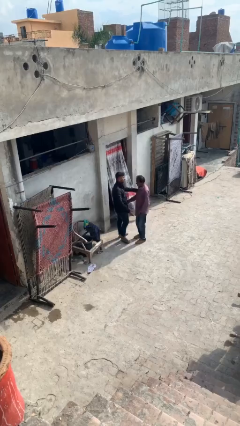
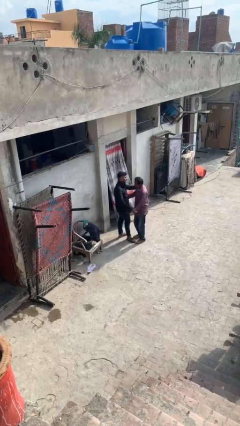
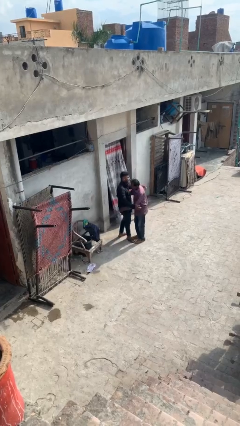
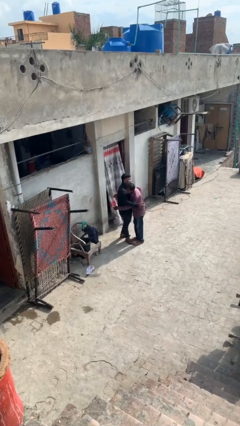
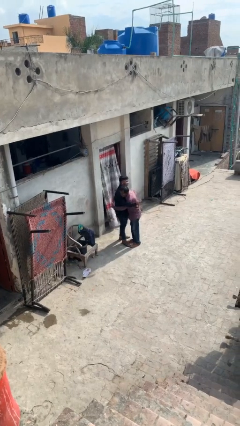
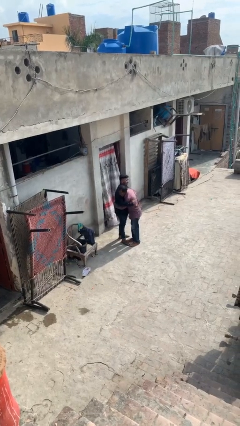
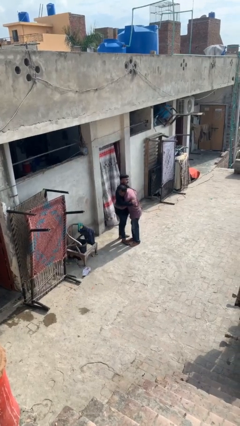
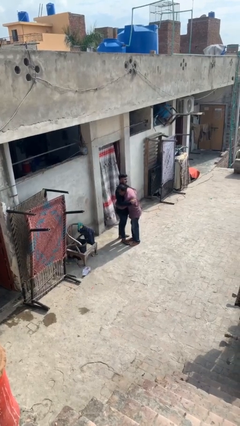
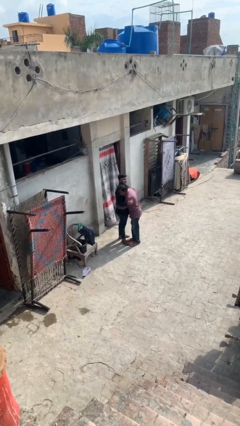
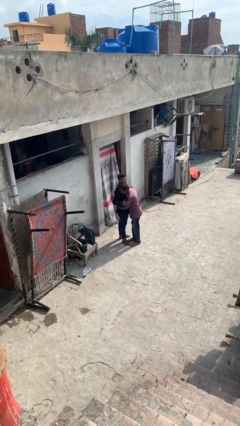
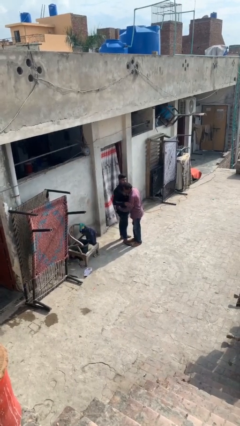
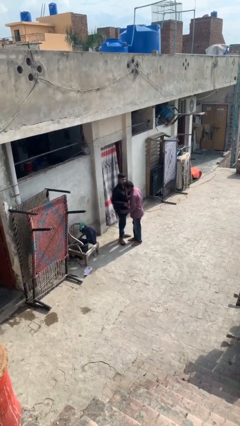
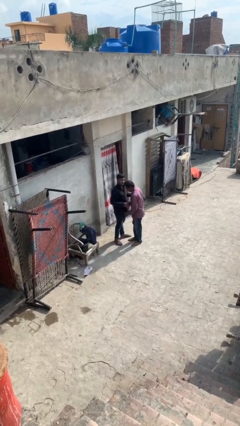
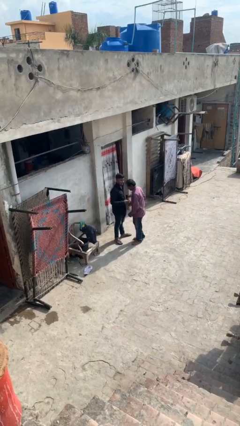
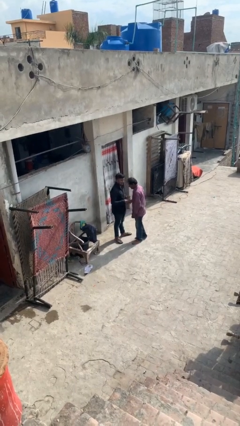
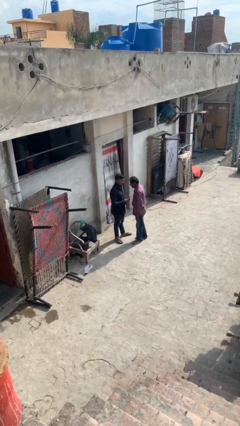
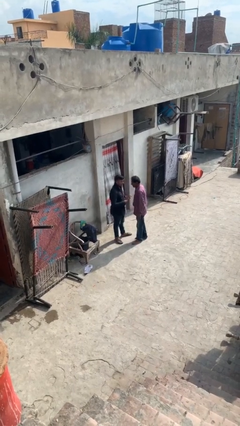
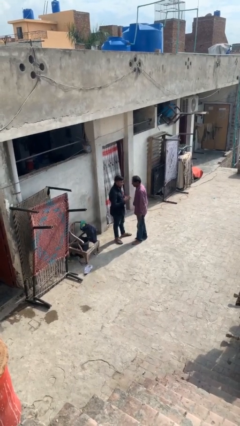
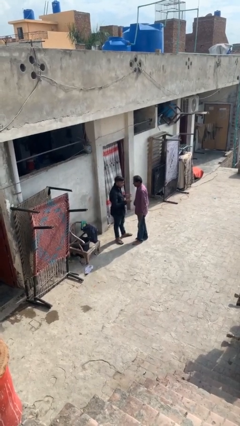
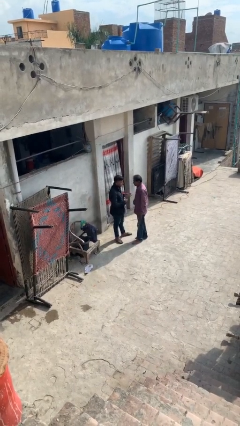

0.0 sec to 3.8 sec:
person embraces person

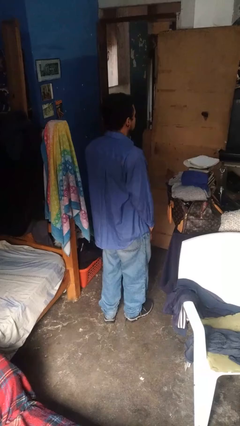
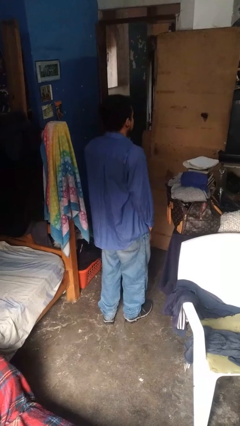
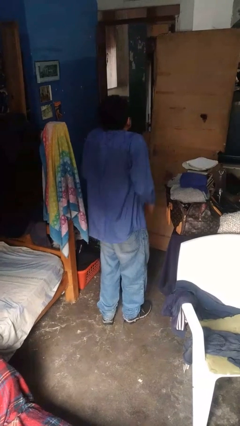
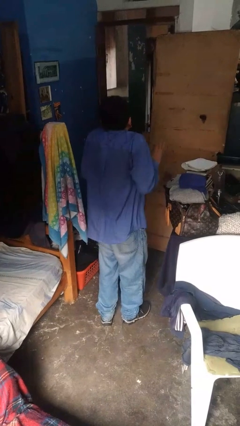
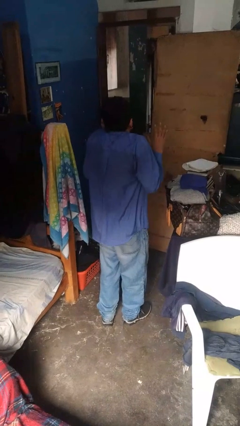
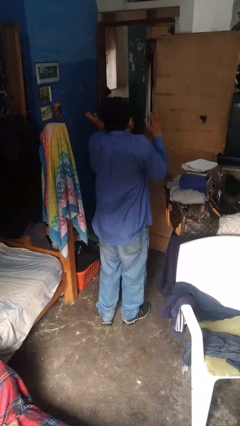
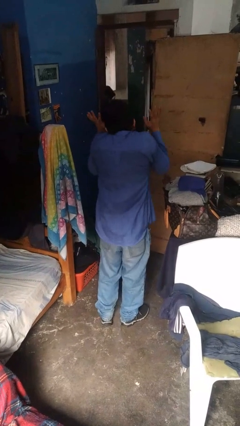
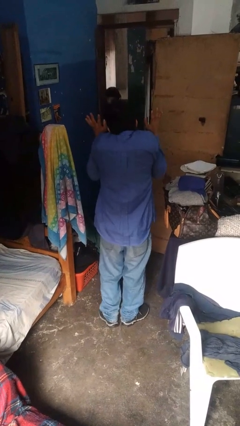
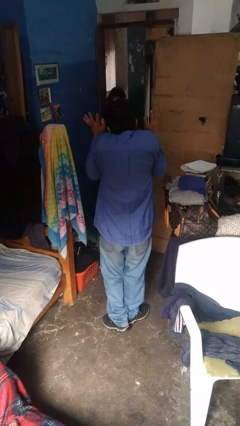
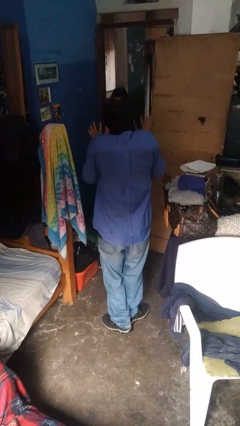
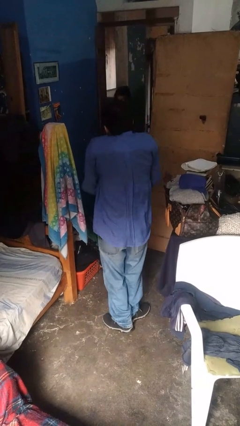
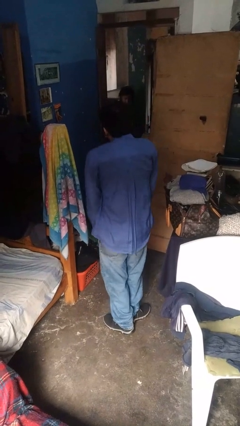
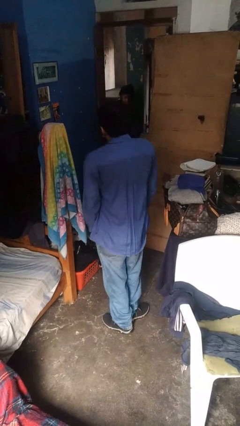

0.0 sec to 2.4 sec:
person shrugs

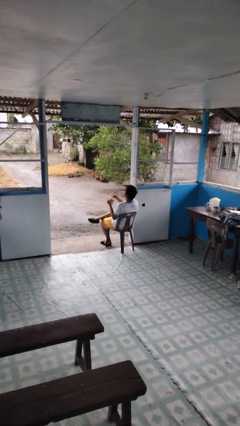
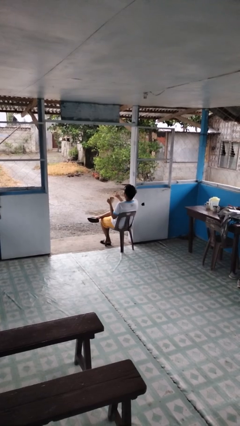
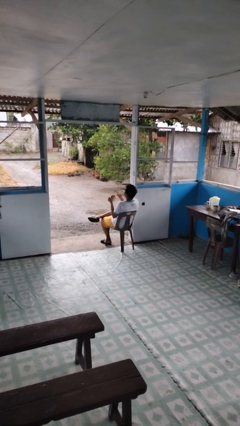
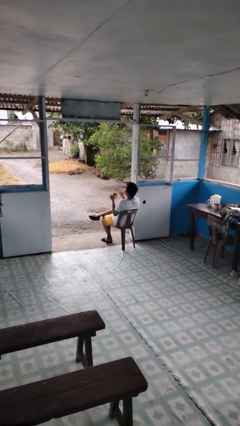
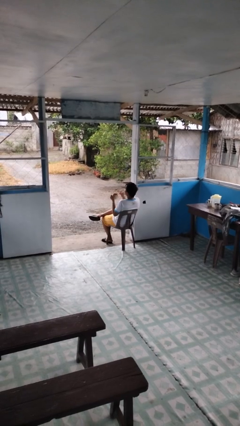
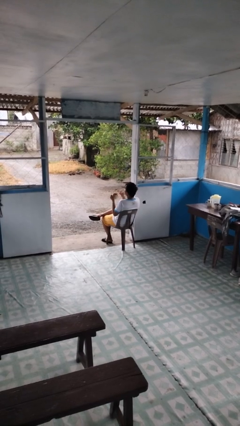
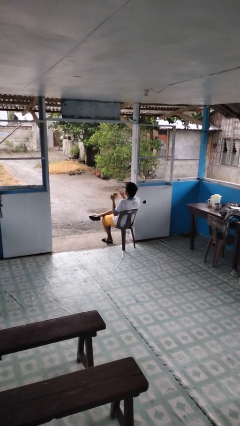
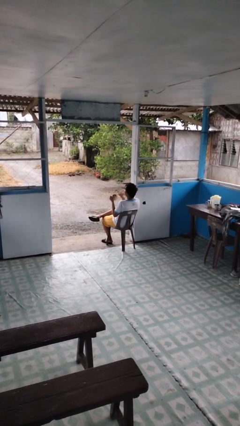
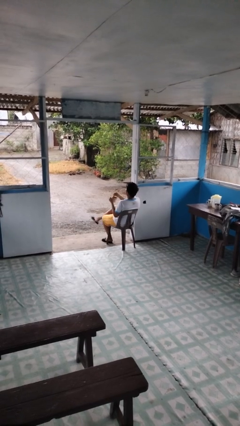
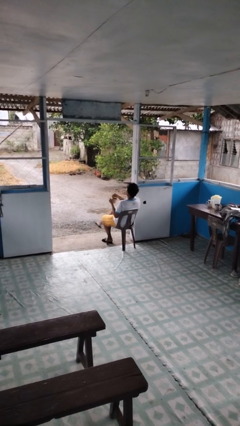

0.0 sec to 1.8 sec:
person drinks from straw

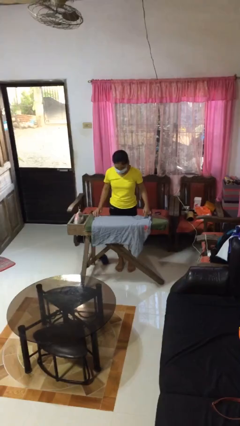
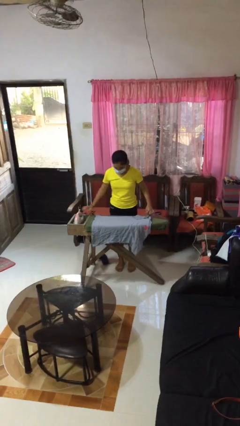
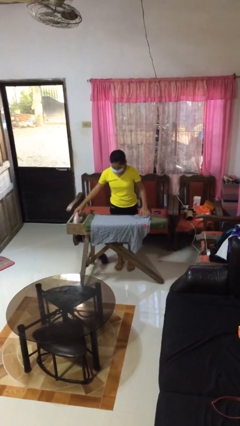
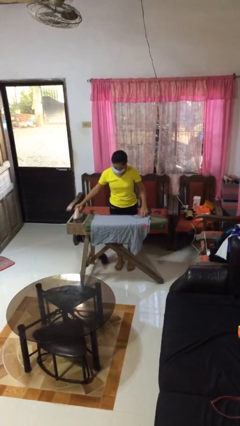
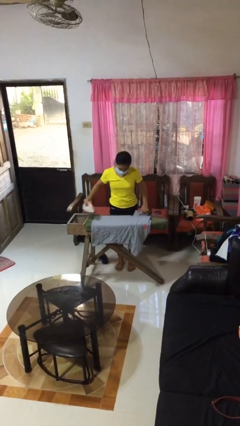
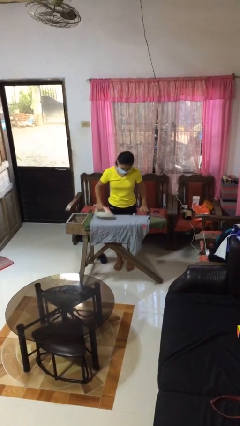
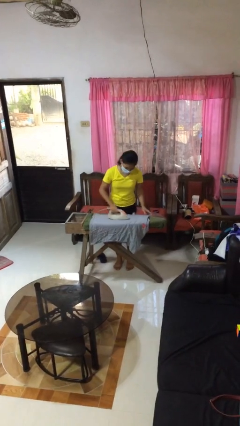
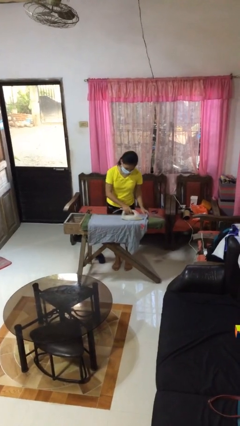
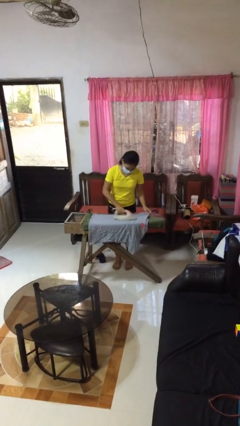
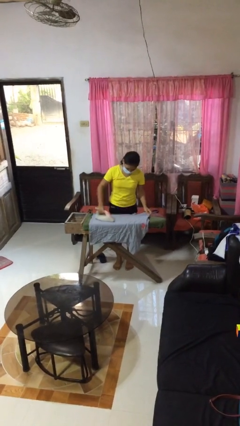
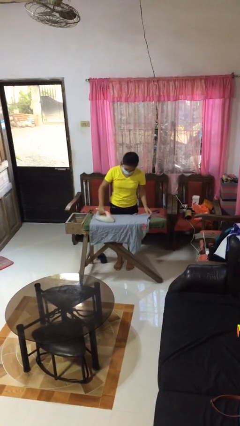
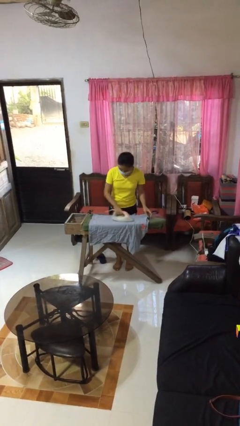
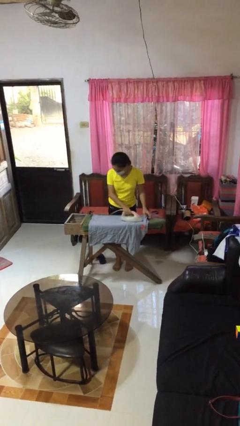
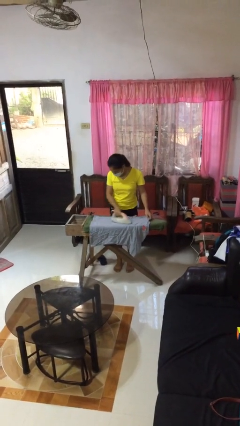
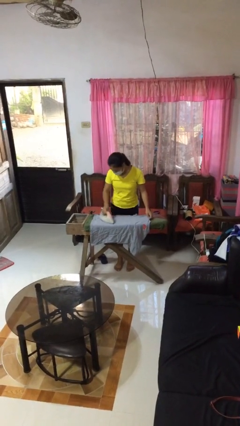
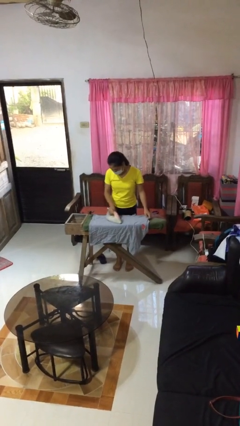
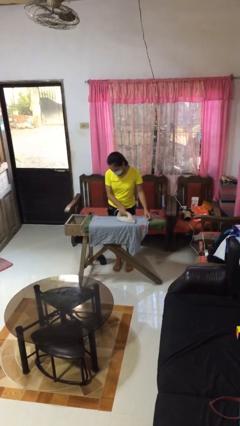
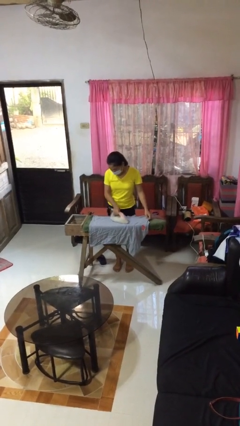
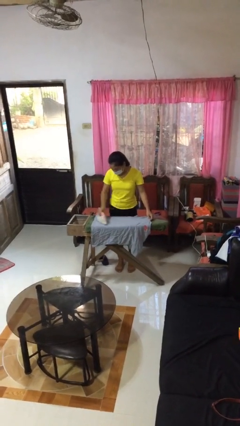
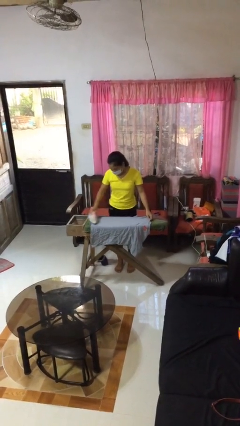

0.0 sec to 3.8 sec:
person irons clothes

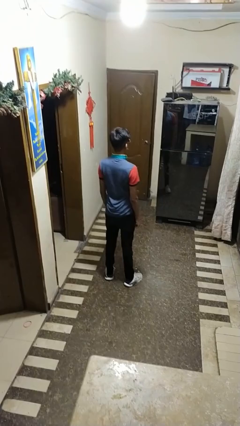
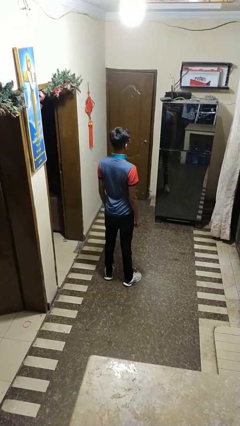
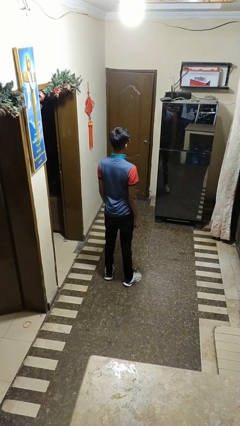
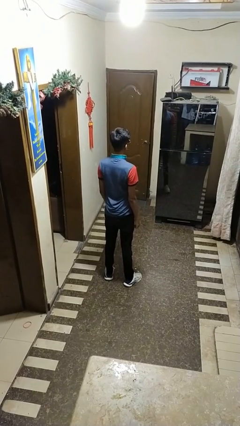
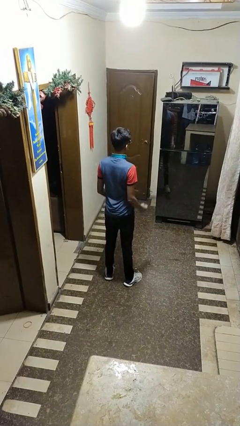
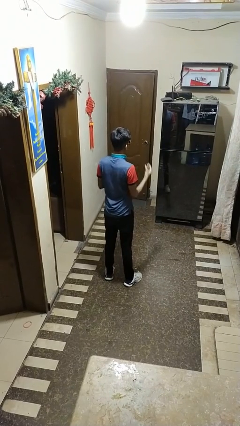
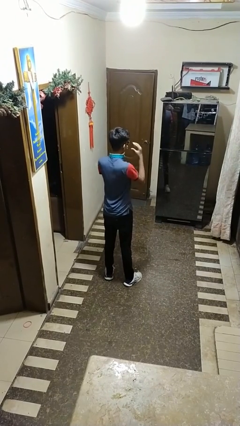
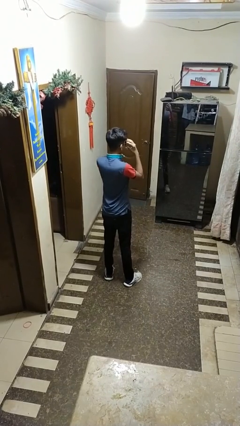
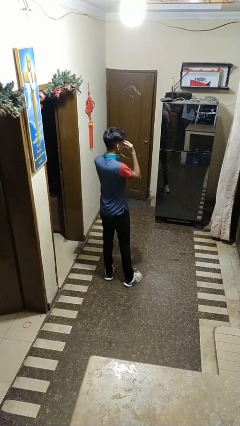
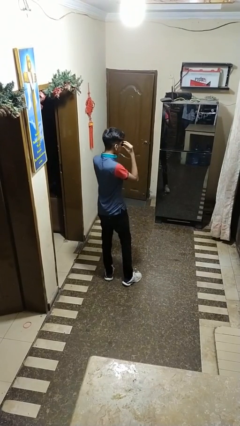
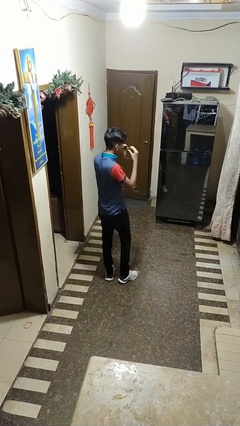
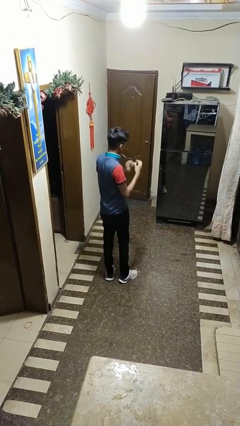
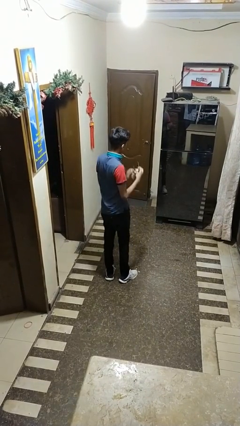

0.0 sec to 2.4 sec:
person takes off sunglasses

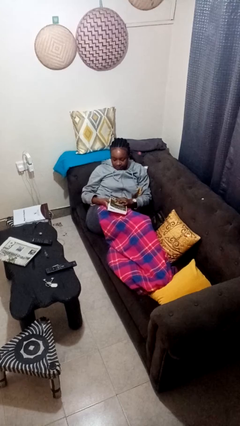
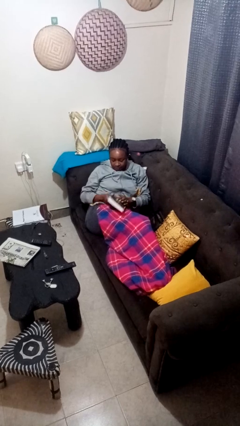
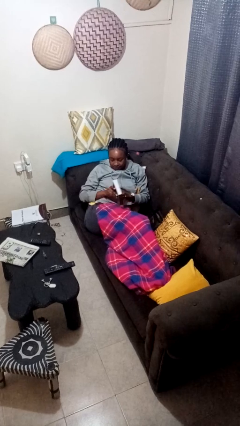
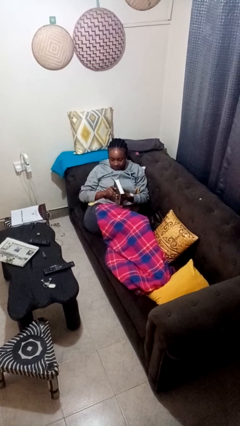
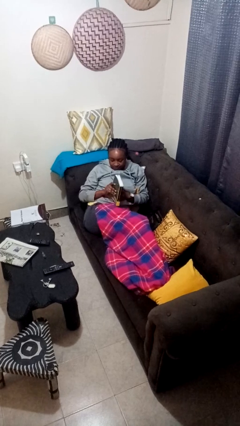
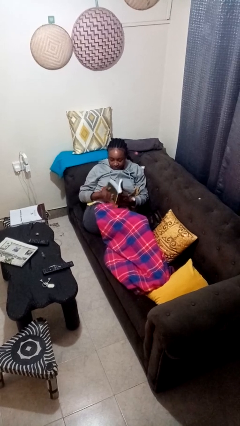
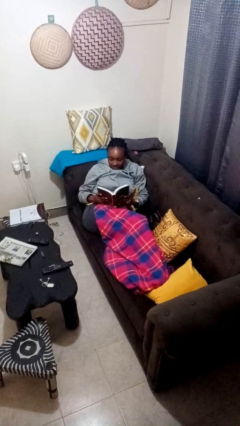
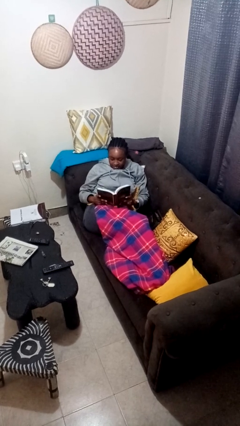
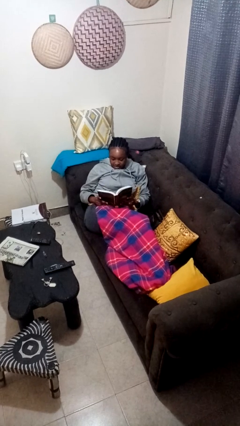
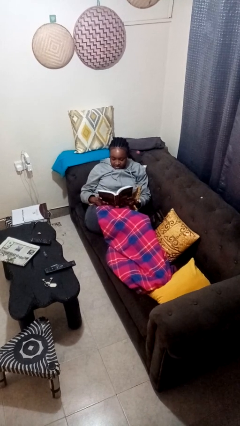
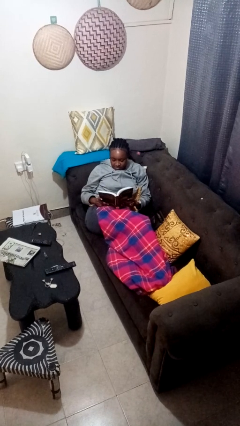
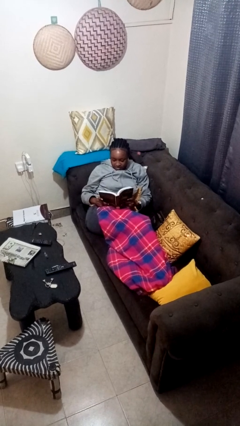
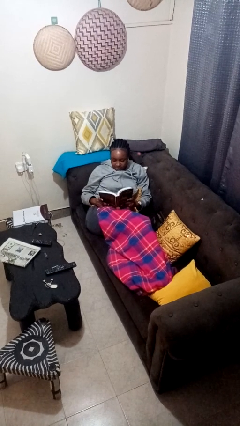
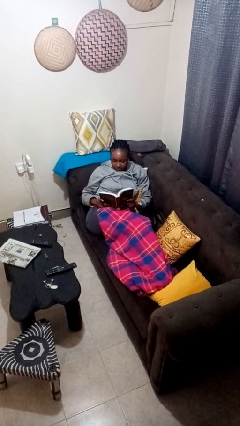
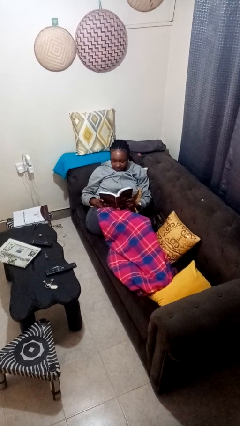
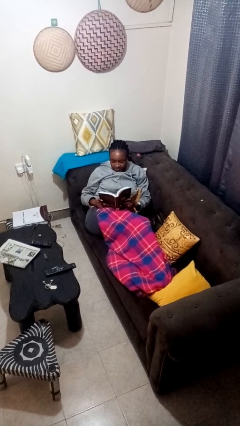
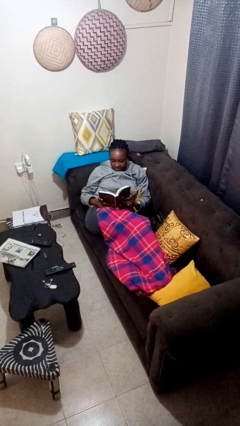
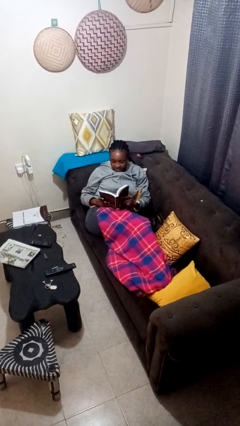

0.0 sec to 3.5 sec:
person reads book
